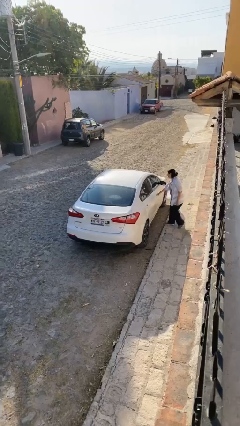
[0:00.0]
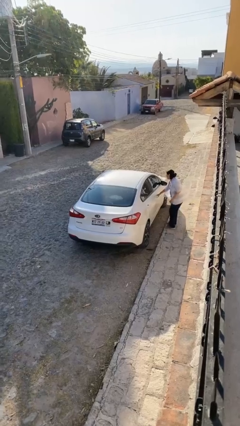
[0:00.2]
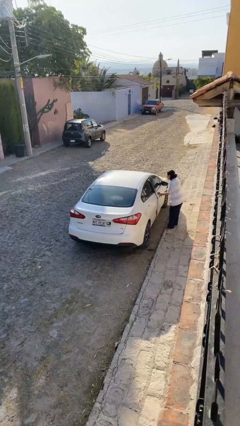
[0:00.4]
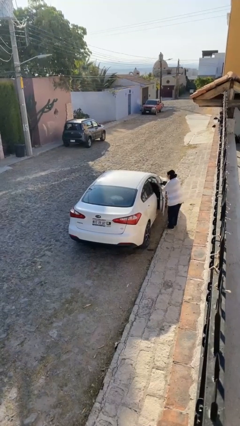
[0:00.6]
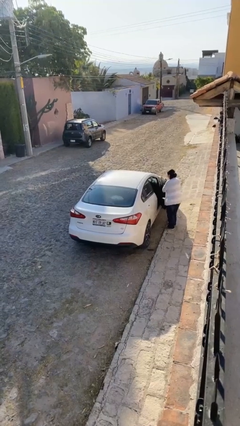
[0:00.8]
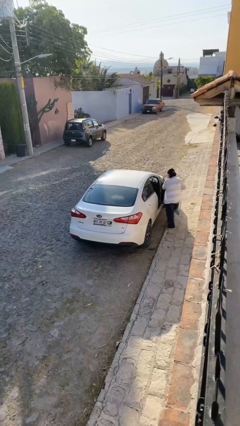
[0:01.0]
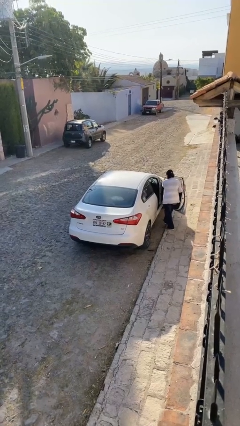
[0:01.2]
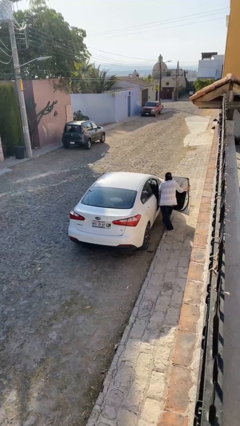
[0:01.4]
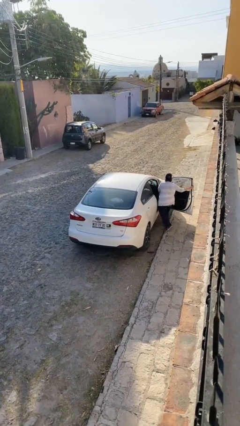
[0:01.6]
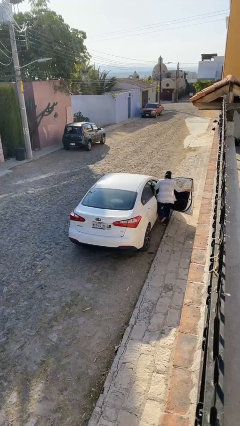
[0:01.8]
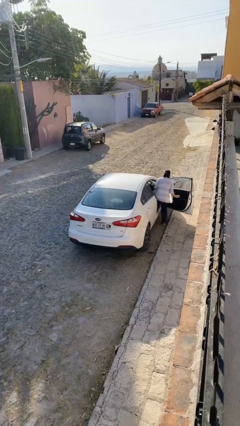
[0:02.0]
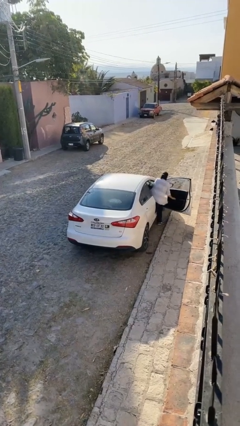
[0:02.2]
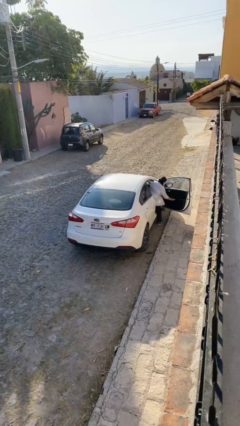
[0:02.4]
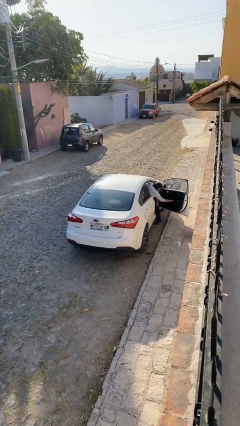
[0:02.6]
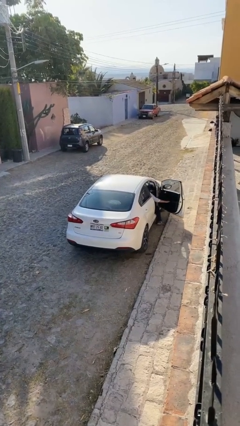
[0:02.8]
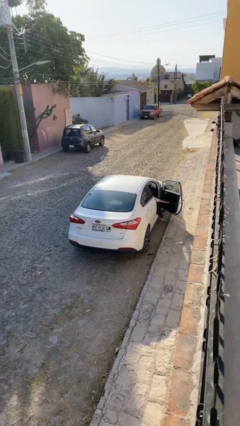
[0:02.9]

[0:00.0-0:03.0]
car picks up person

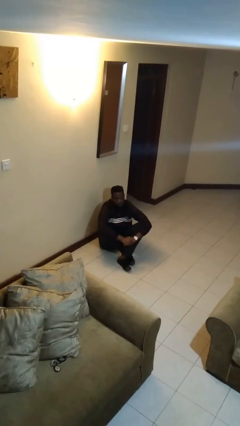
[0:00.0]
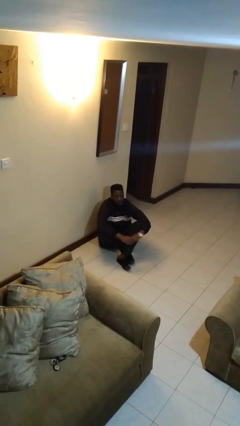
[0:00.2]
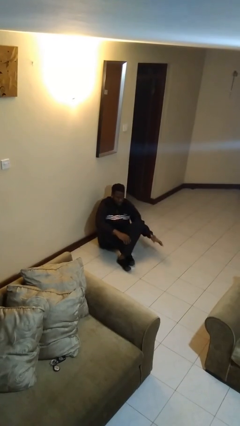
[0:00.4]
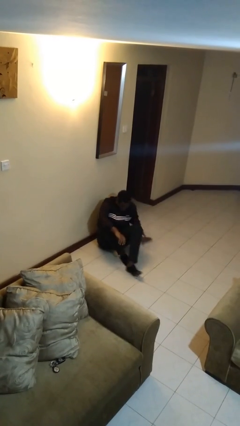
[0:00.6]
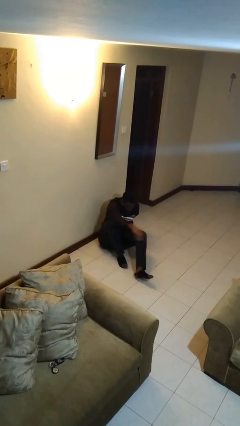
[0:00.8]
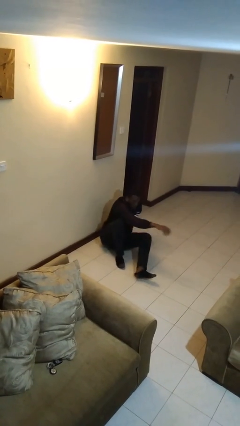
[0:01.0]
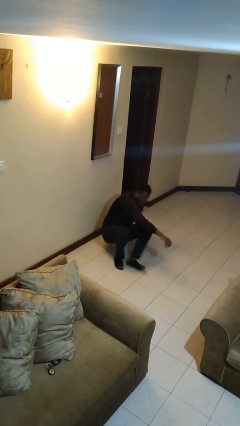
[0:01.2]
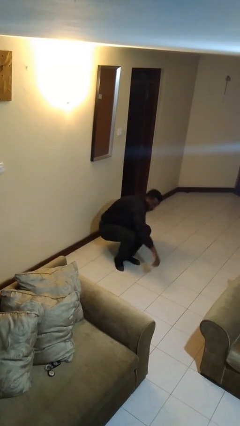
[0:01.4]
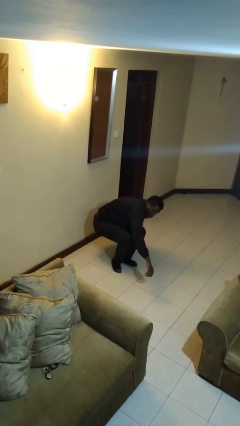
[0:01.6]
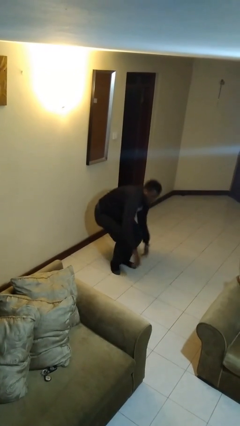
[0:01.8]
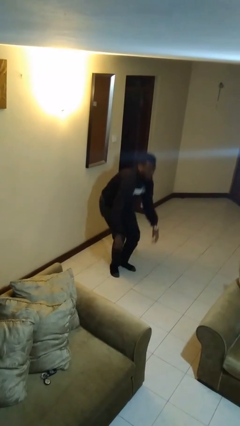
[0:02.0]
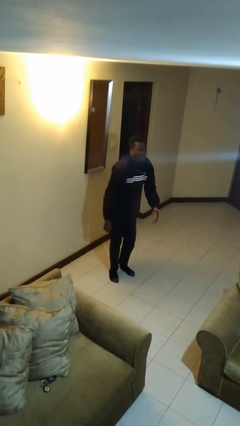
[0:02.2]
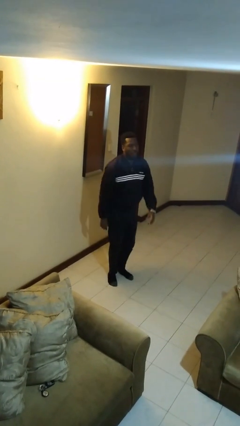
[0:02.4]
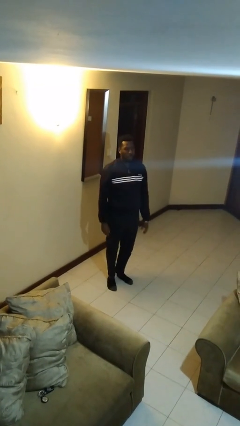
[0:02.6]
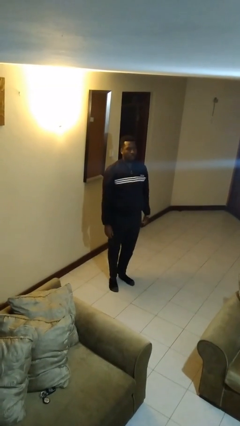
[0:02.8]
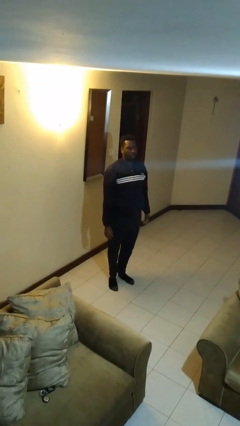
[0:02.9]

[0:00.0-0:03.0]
person stands up from floor

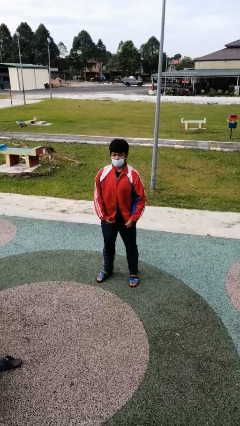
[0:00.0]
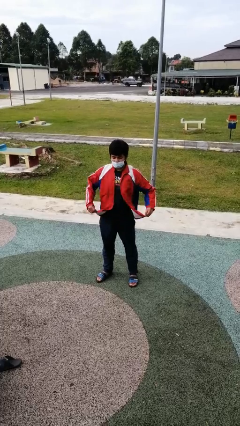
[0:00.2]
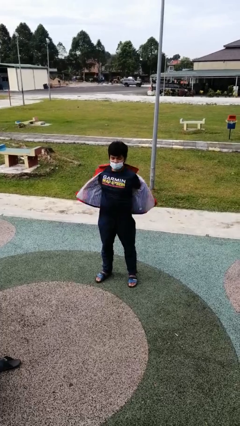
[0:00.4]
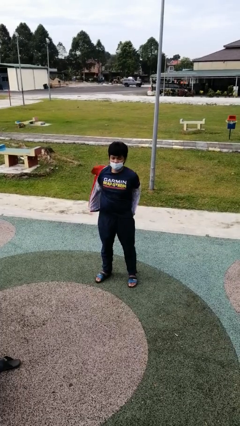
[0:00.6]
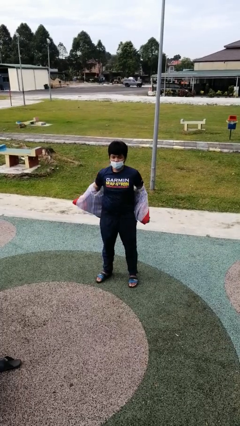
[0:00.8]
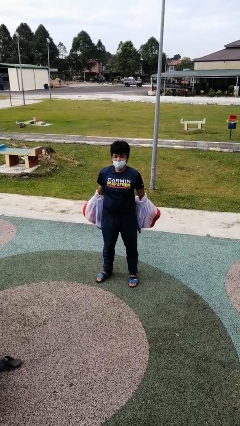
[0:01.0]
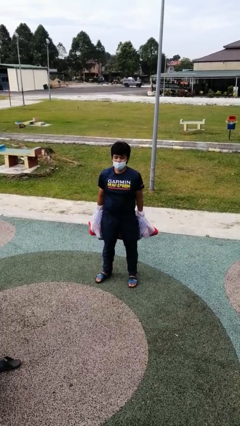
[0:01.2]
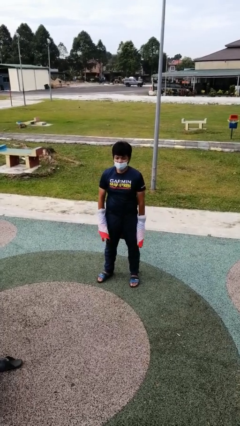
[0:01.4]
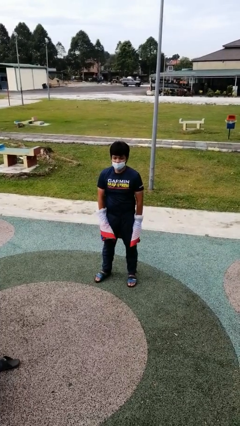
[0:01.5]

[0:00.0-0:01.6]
person takes off jacket

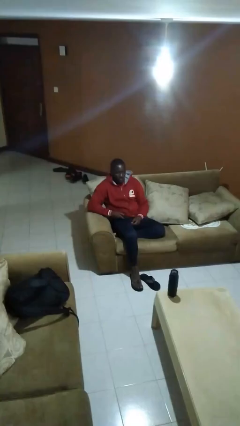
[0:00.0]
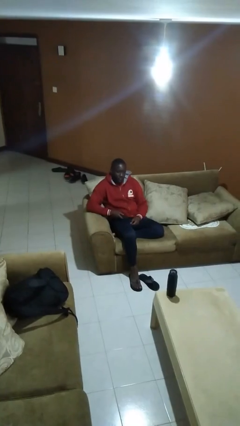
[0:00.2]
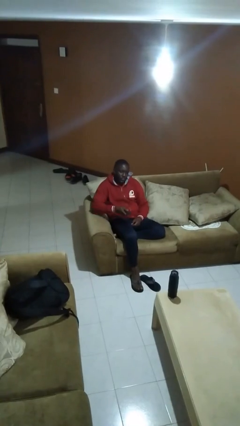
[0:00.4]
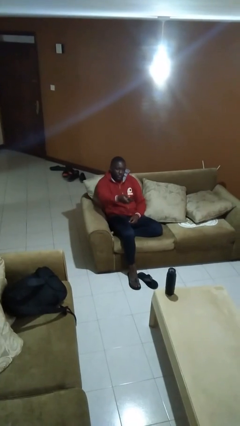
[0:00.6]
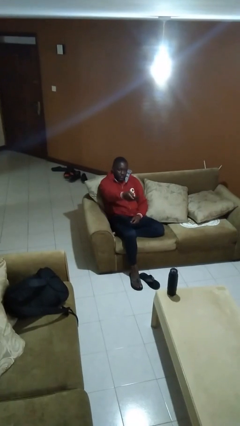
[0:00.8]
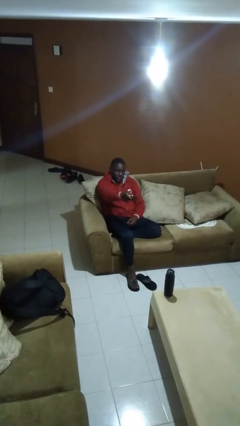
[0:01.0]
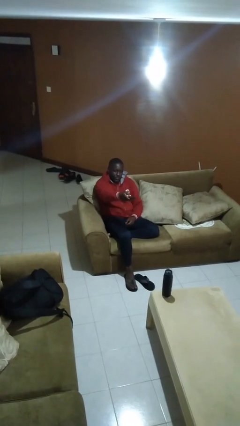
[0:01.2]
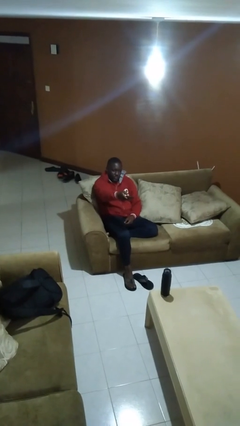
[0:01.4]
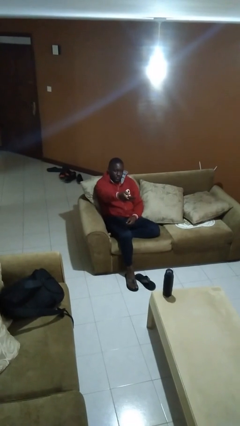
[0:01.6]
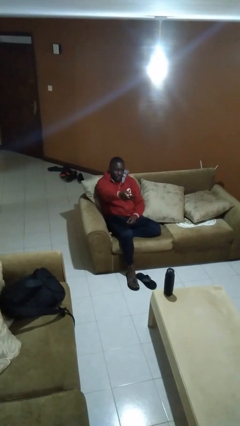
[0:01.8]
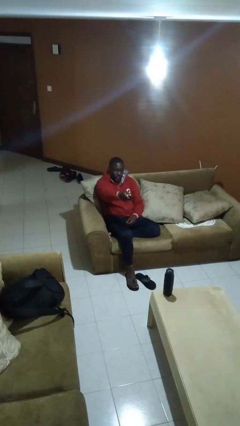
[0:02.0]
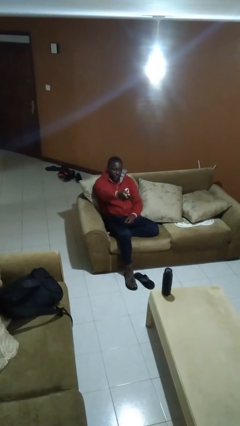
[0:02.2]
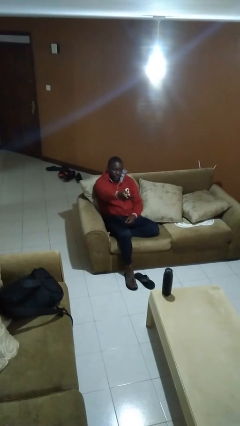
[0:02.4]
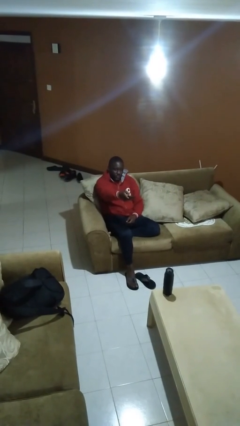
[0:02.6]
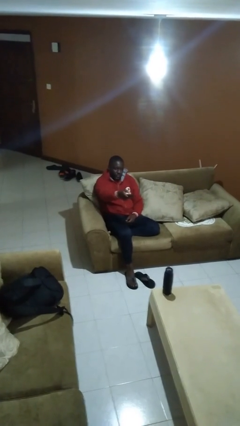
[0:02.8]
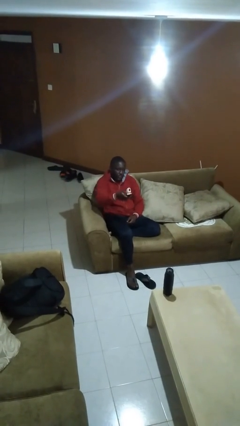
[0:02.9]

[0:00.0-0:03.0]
person uses television remote

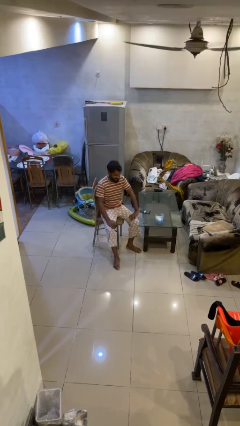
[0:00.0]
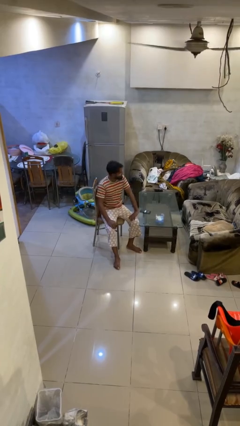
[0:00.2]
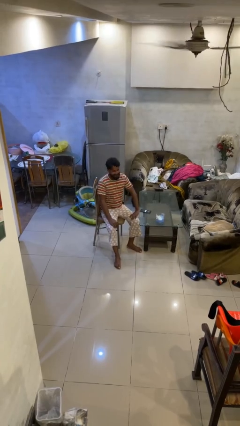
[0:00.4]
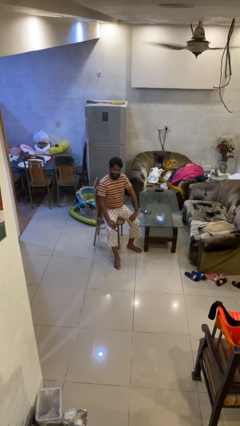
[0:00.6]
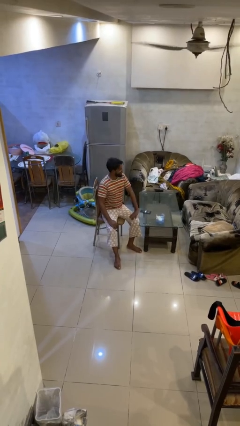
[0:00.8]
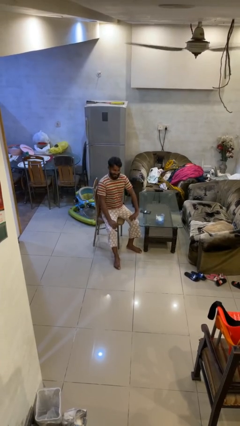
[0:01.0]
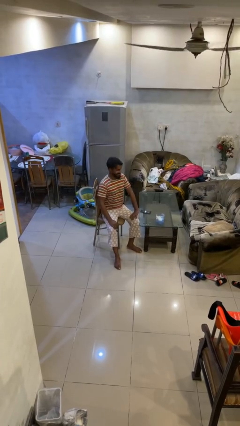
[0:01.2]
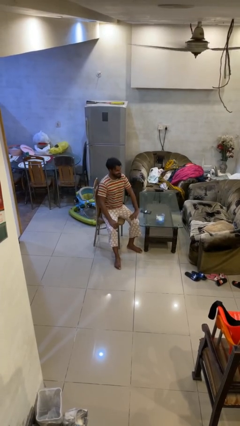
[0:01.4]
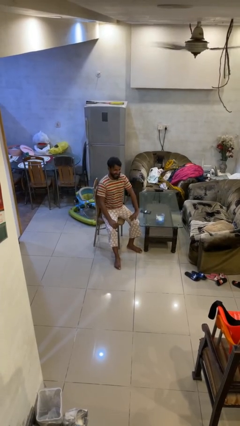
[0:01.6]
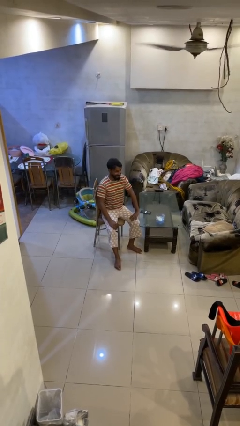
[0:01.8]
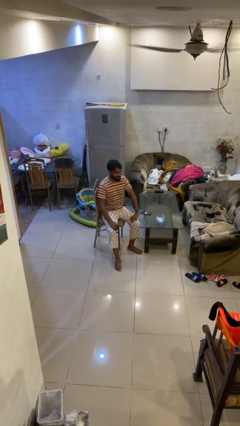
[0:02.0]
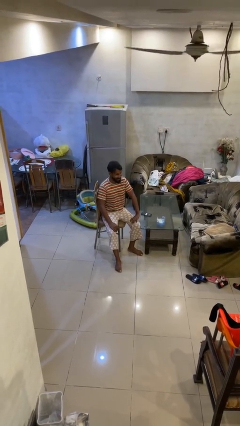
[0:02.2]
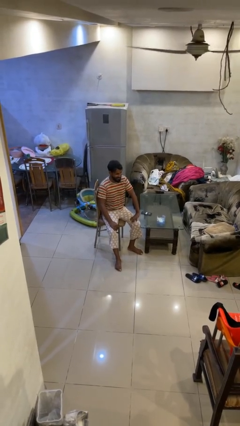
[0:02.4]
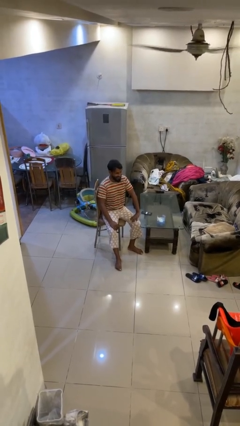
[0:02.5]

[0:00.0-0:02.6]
person shakes head

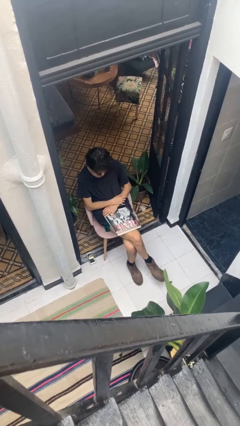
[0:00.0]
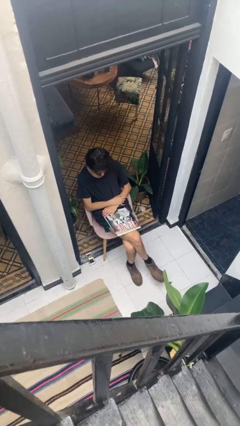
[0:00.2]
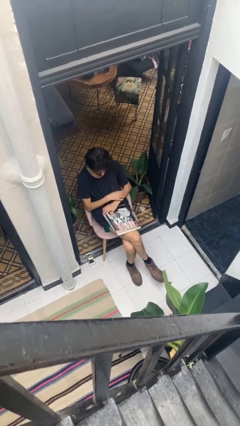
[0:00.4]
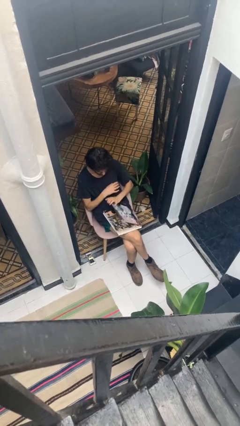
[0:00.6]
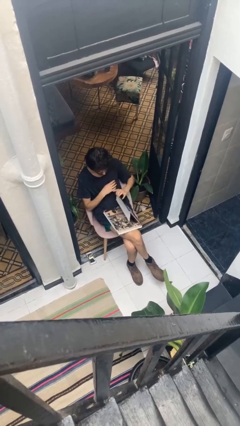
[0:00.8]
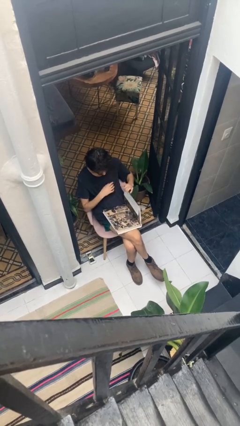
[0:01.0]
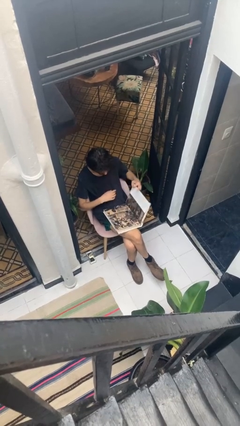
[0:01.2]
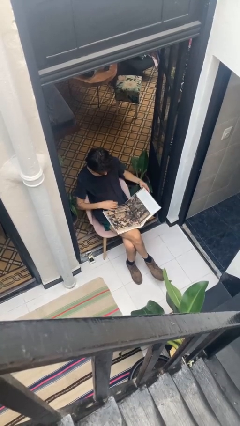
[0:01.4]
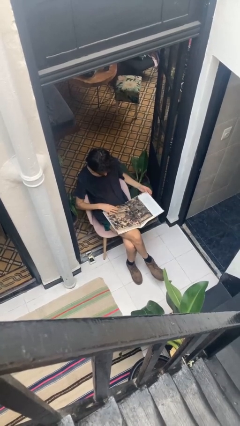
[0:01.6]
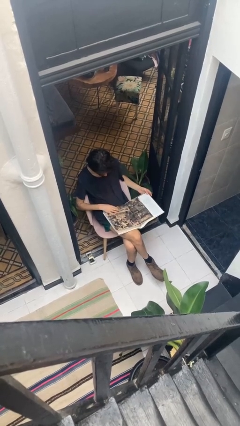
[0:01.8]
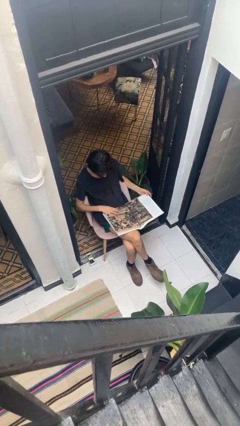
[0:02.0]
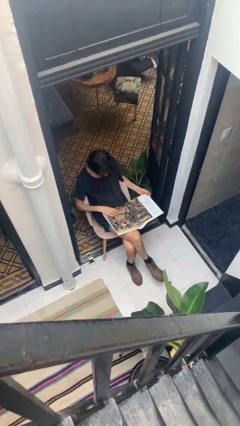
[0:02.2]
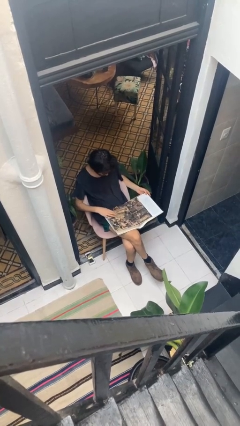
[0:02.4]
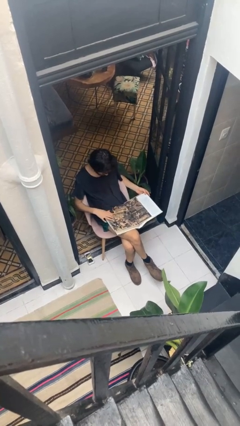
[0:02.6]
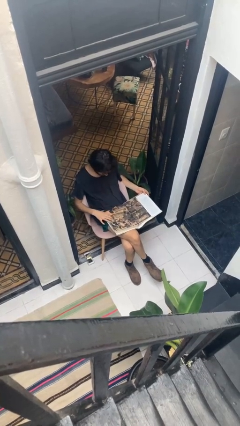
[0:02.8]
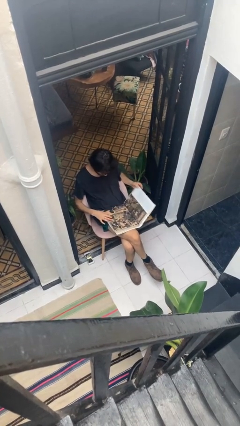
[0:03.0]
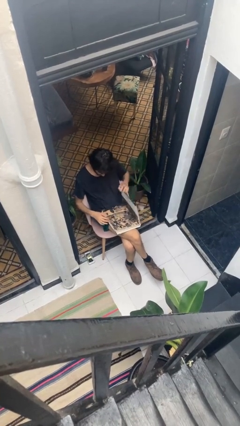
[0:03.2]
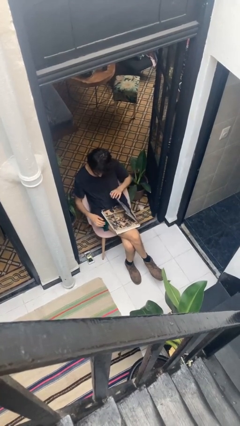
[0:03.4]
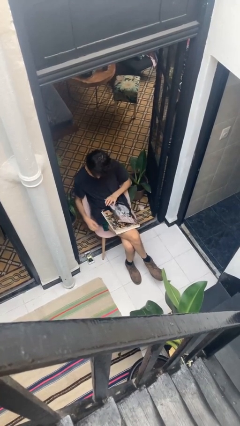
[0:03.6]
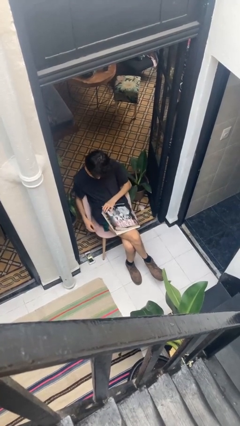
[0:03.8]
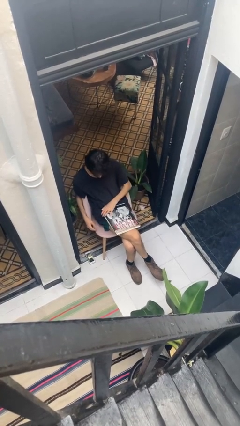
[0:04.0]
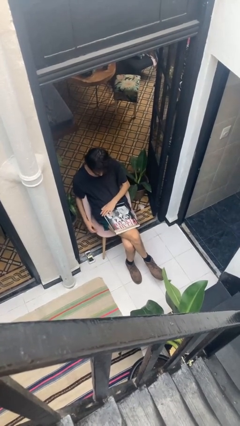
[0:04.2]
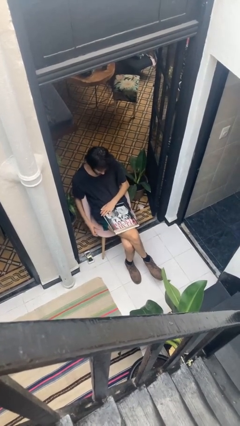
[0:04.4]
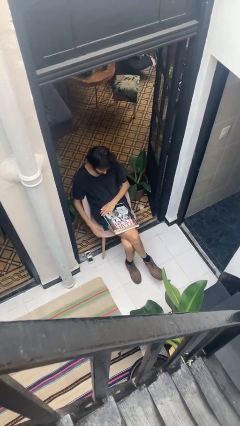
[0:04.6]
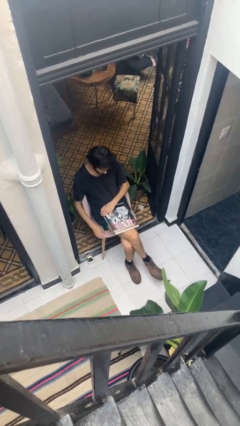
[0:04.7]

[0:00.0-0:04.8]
person reads document
